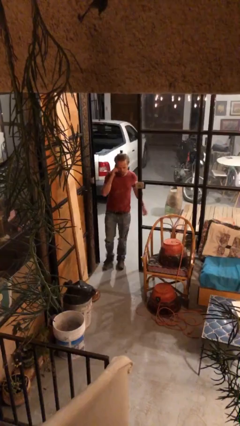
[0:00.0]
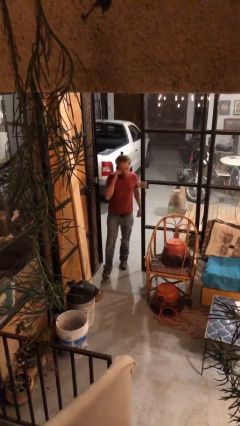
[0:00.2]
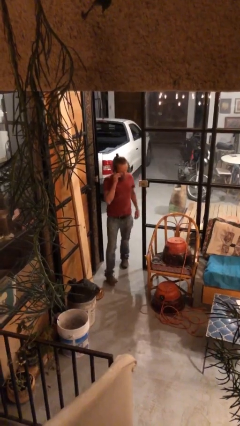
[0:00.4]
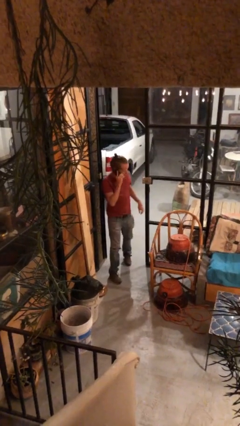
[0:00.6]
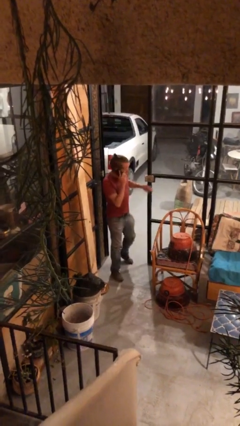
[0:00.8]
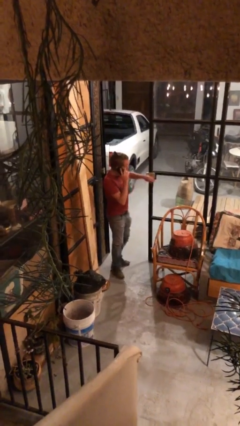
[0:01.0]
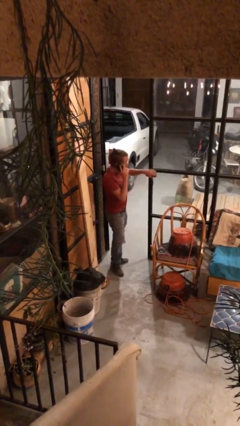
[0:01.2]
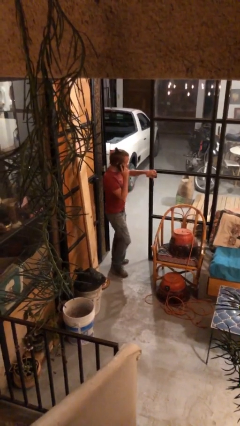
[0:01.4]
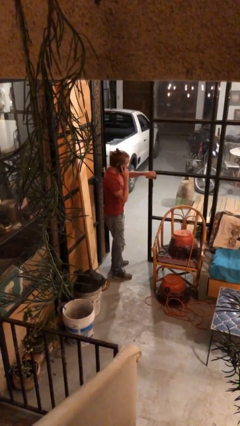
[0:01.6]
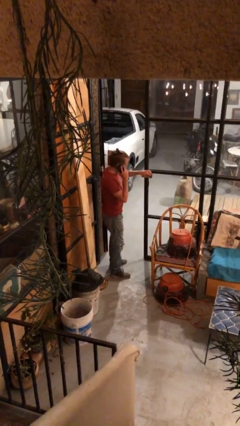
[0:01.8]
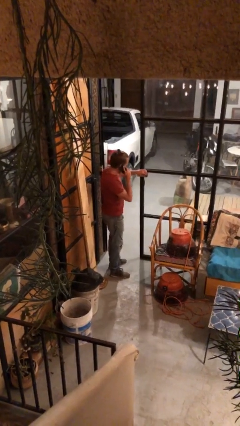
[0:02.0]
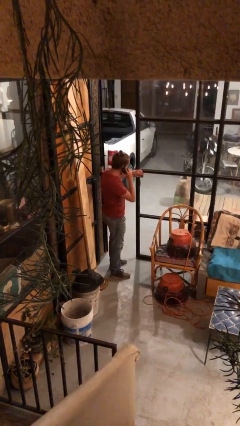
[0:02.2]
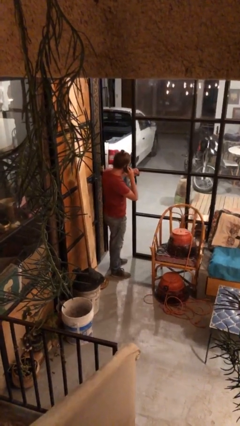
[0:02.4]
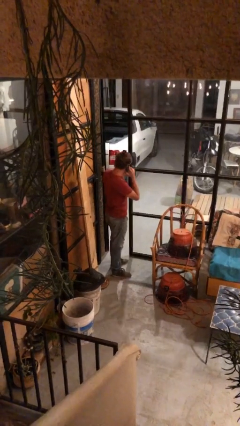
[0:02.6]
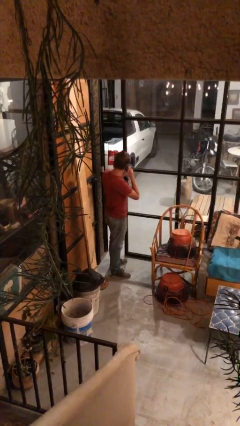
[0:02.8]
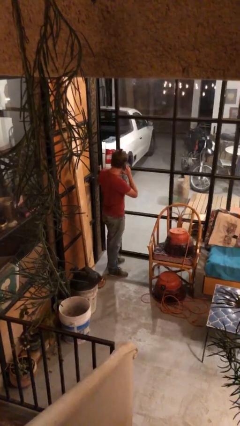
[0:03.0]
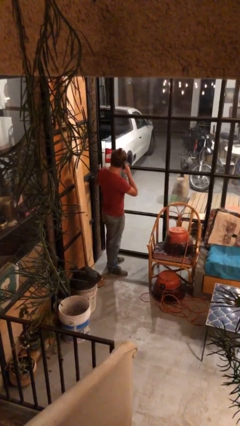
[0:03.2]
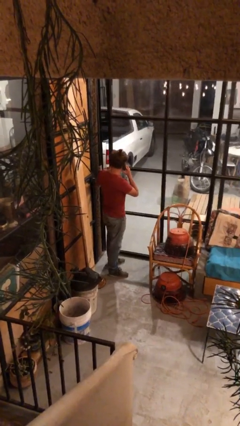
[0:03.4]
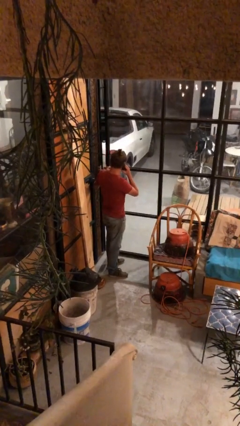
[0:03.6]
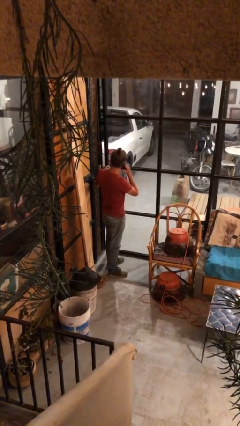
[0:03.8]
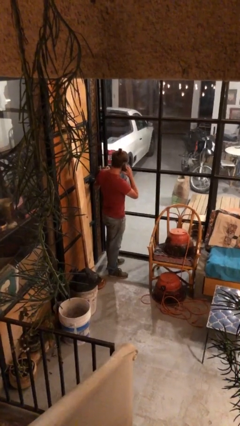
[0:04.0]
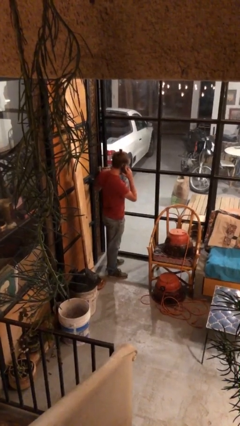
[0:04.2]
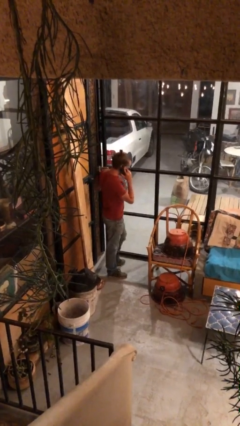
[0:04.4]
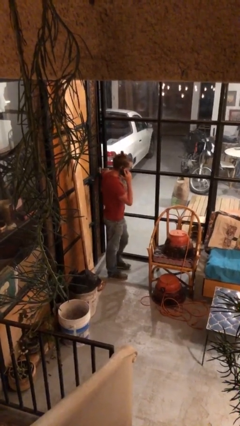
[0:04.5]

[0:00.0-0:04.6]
person closes facility door

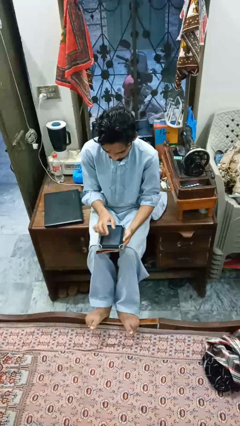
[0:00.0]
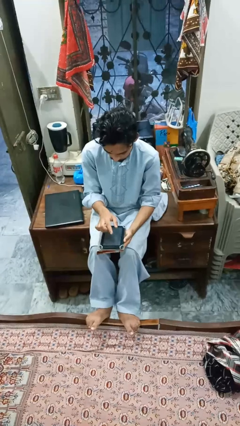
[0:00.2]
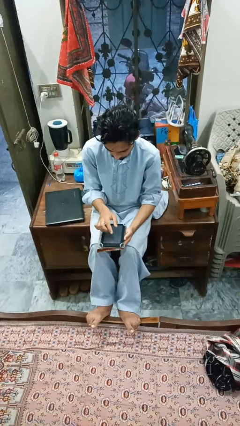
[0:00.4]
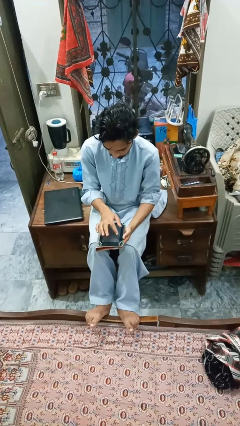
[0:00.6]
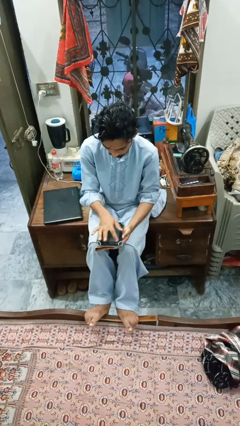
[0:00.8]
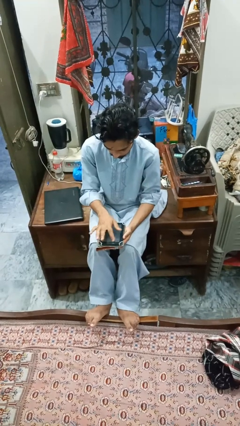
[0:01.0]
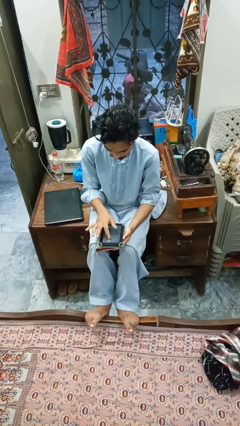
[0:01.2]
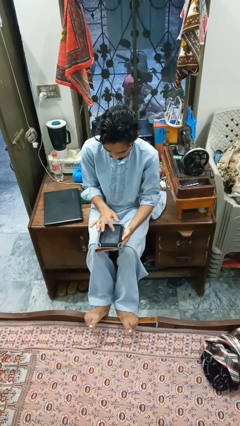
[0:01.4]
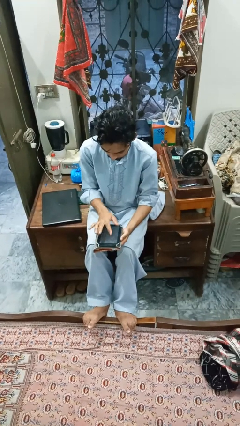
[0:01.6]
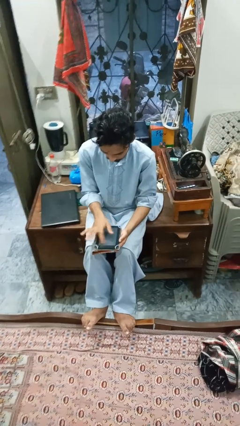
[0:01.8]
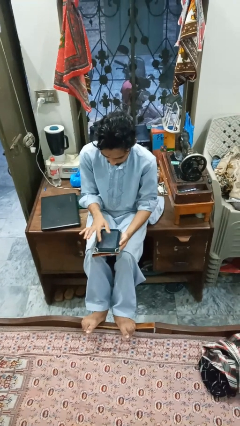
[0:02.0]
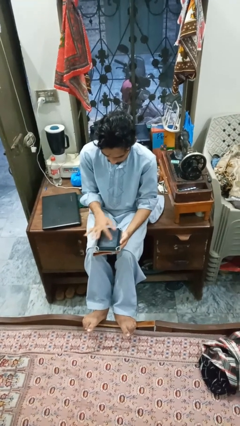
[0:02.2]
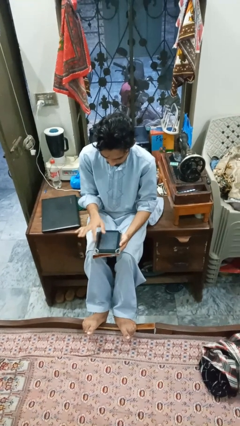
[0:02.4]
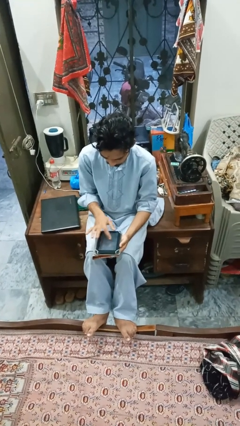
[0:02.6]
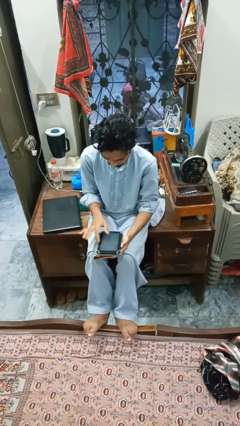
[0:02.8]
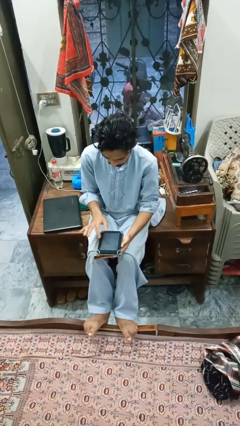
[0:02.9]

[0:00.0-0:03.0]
person interacts with tablet

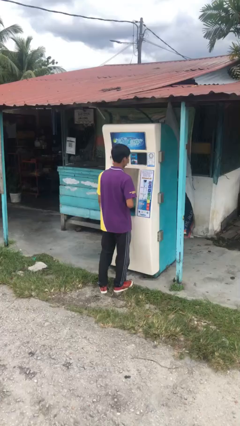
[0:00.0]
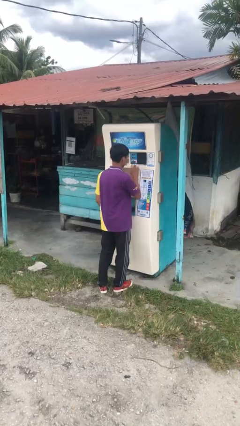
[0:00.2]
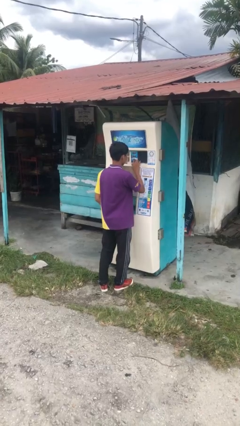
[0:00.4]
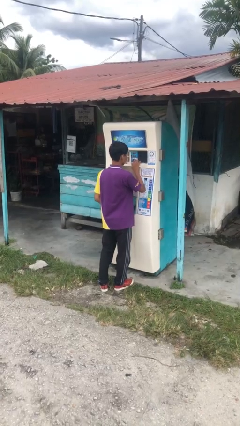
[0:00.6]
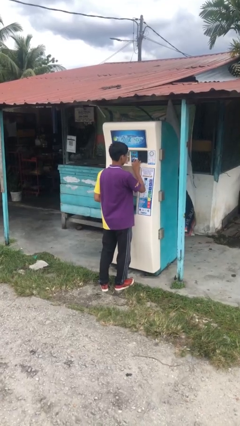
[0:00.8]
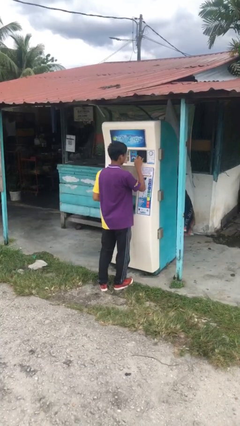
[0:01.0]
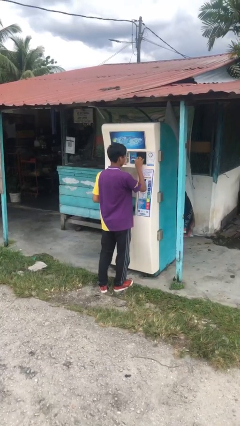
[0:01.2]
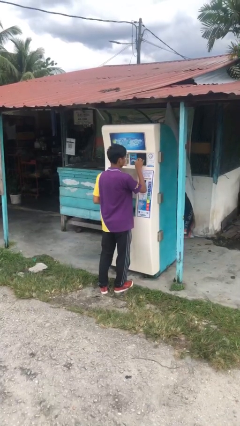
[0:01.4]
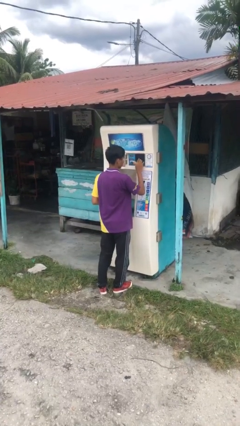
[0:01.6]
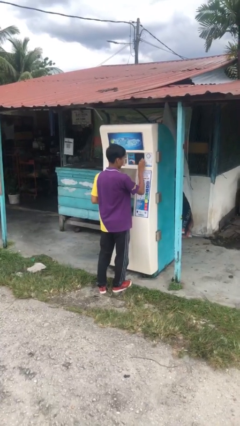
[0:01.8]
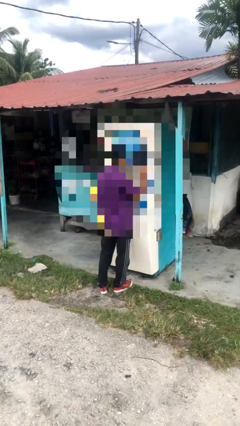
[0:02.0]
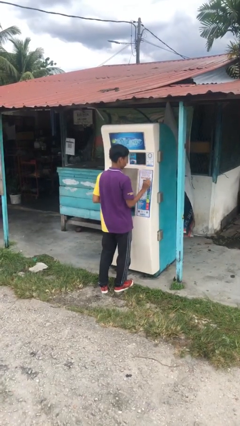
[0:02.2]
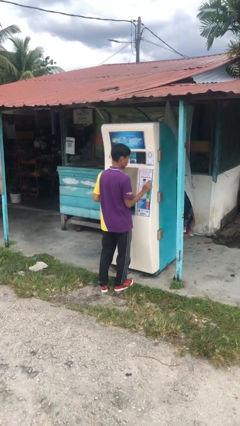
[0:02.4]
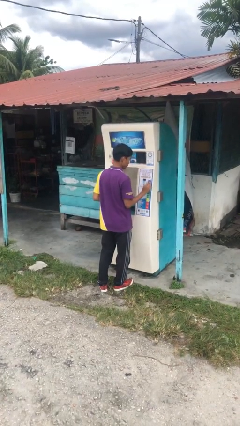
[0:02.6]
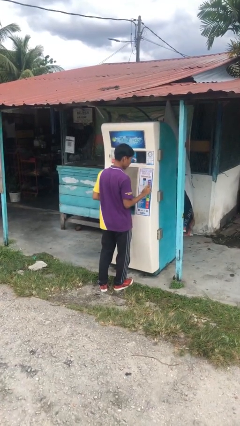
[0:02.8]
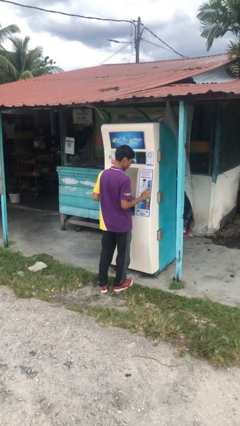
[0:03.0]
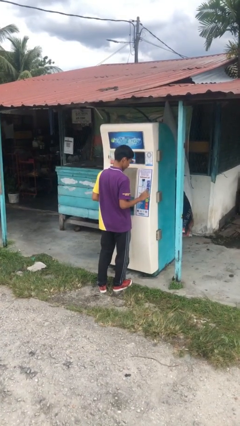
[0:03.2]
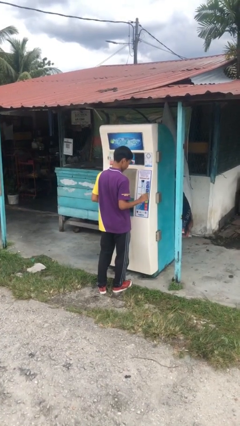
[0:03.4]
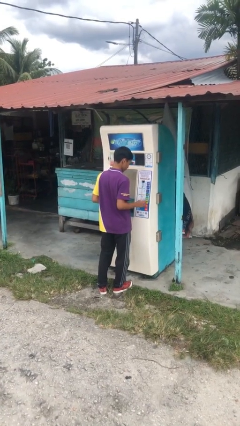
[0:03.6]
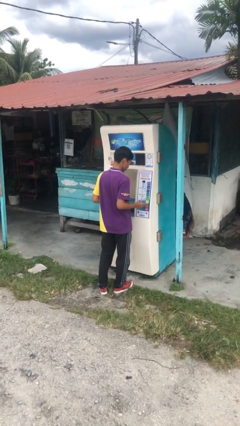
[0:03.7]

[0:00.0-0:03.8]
person purchases from machine

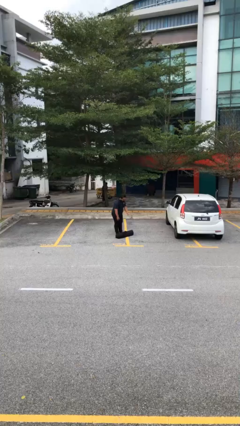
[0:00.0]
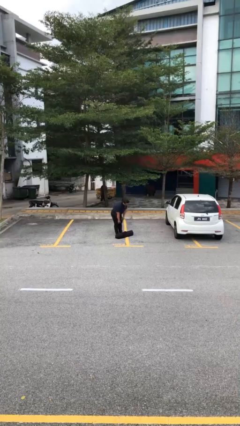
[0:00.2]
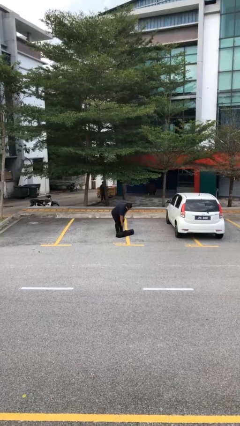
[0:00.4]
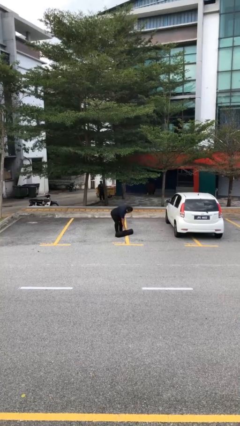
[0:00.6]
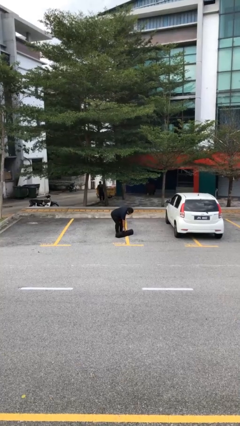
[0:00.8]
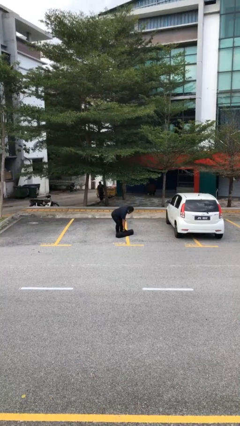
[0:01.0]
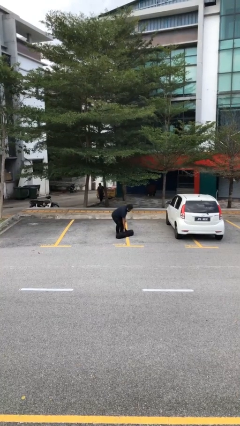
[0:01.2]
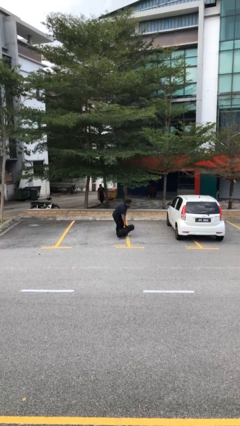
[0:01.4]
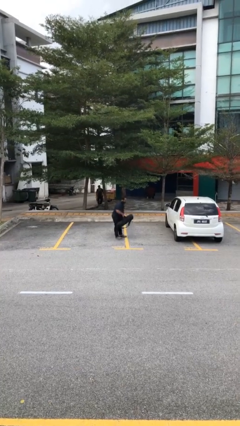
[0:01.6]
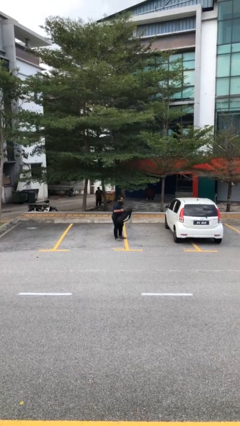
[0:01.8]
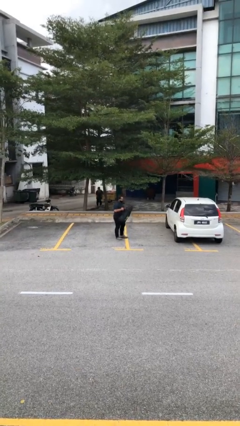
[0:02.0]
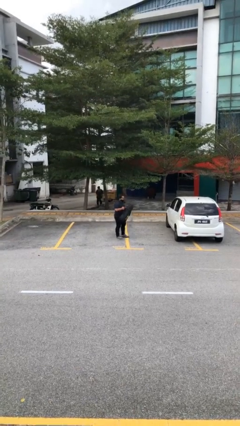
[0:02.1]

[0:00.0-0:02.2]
person picks up object from floor

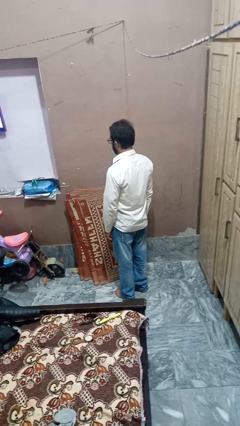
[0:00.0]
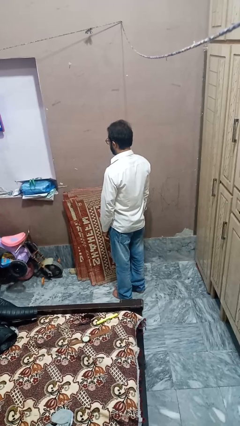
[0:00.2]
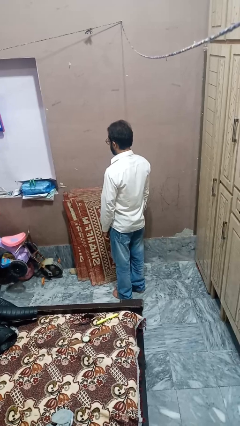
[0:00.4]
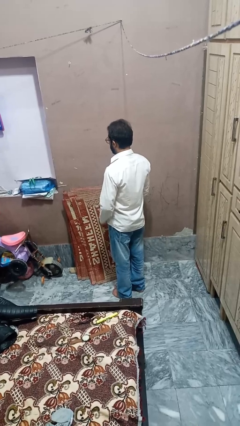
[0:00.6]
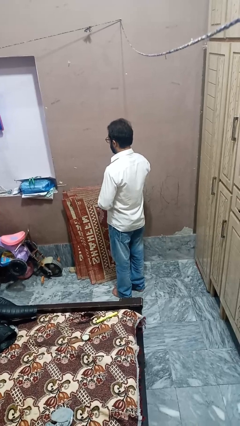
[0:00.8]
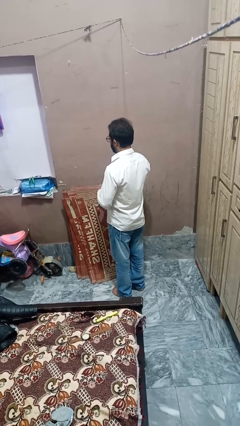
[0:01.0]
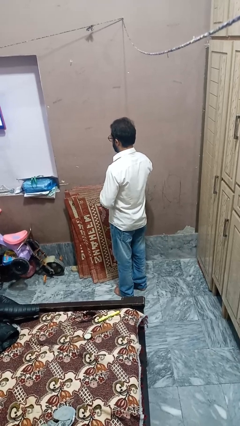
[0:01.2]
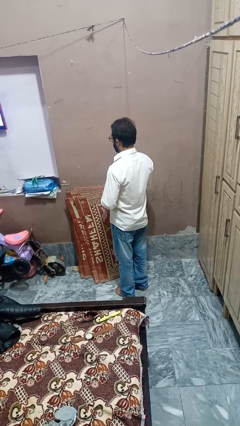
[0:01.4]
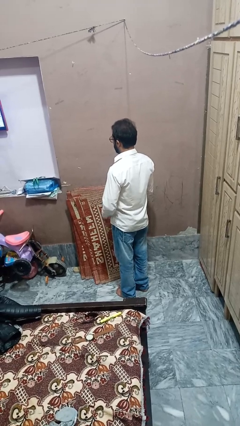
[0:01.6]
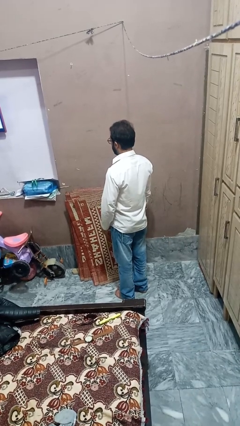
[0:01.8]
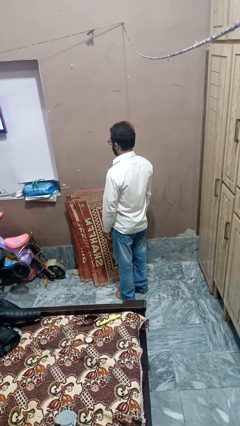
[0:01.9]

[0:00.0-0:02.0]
person takes off ring

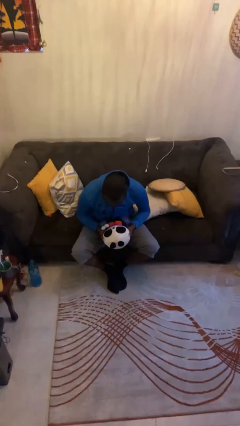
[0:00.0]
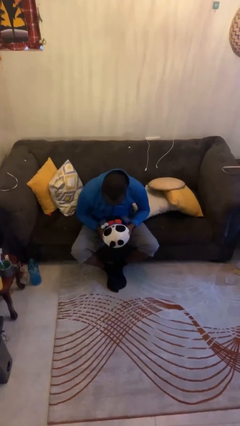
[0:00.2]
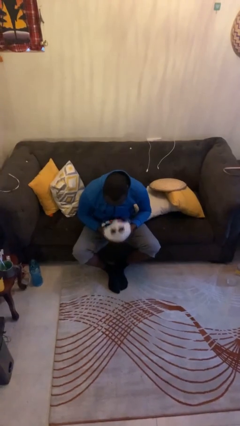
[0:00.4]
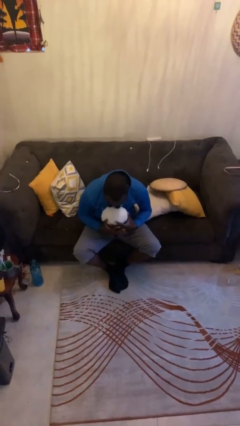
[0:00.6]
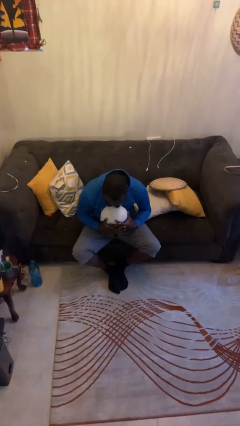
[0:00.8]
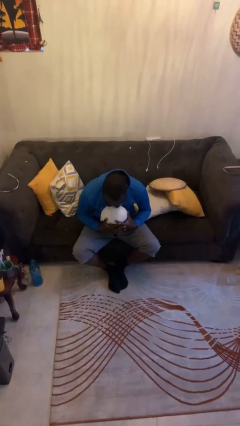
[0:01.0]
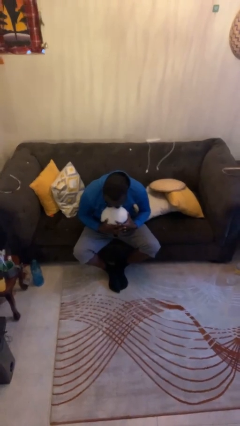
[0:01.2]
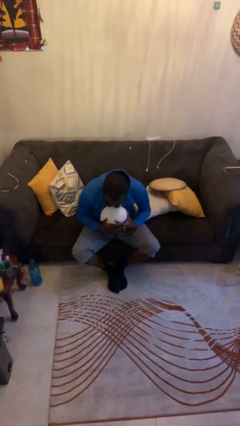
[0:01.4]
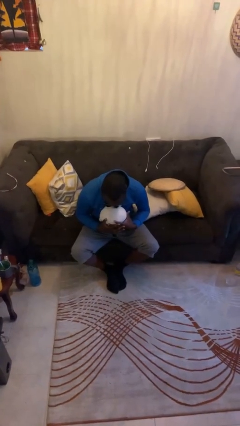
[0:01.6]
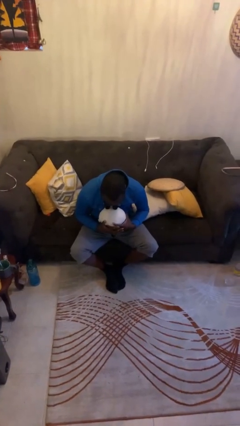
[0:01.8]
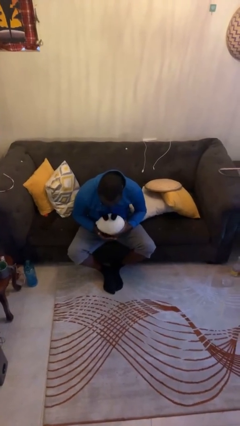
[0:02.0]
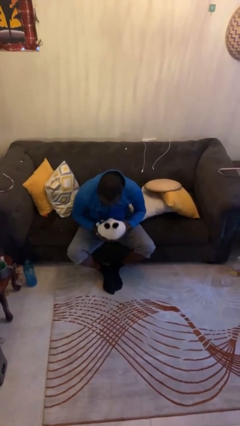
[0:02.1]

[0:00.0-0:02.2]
person hugs stuffed animal
